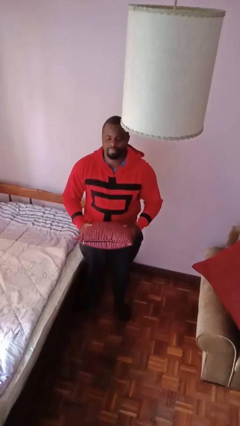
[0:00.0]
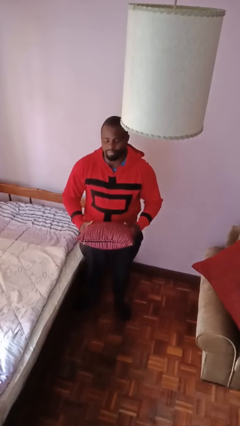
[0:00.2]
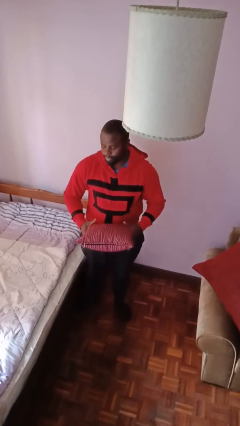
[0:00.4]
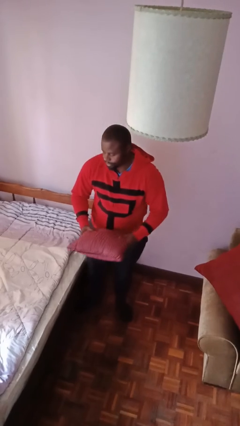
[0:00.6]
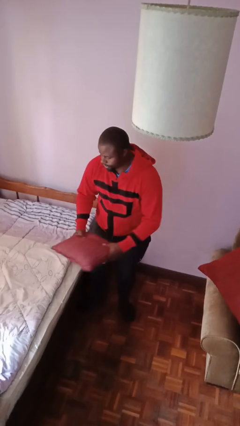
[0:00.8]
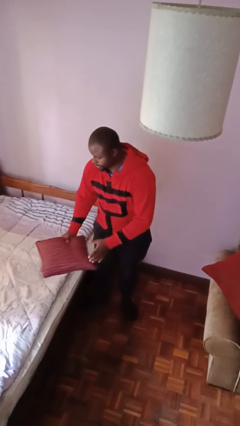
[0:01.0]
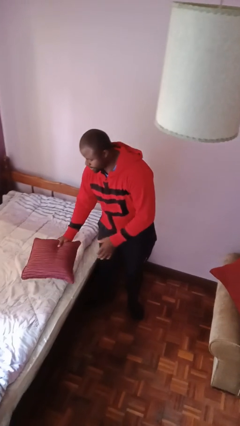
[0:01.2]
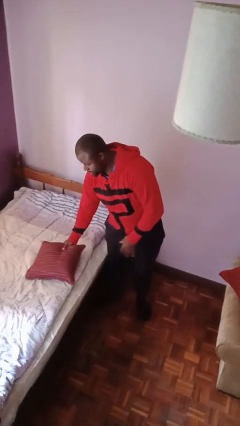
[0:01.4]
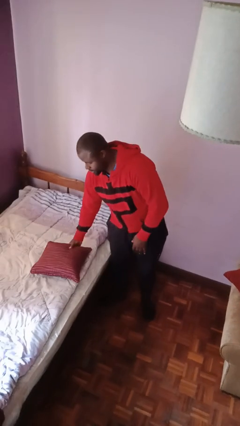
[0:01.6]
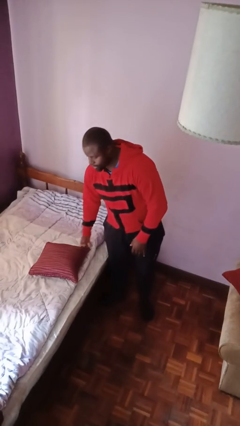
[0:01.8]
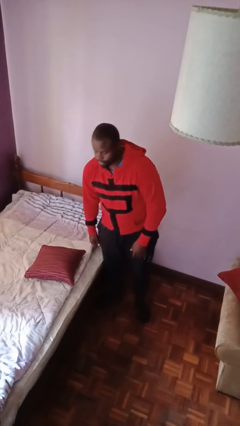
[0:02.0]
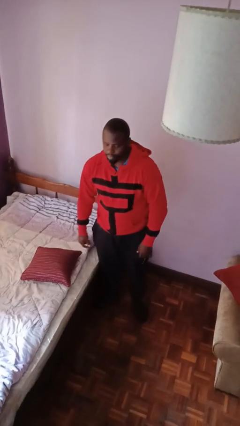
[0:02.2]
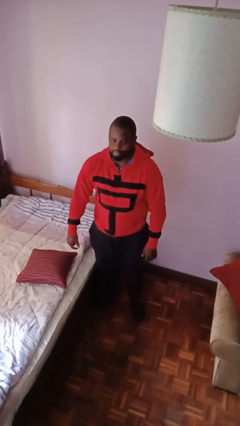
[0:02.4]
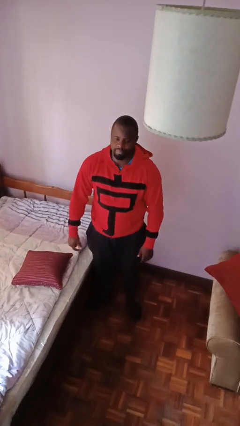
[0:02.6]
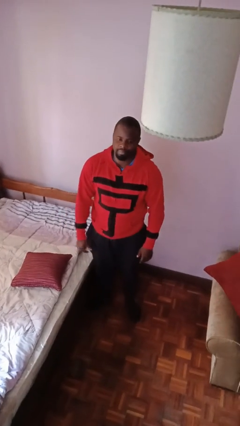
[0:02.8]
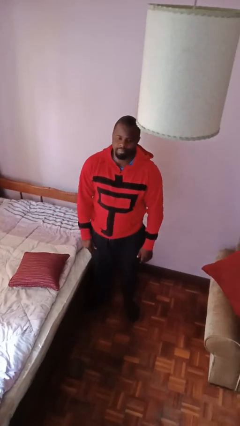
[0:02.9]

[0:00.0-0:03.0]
person puts down object on bed

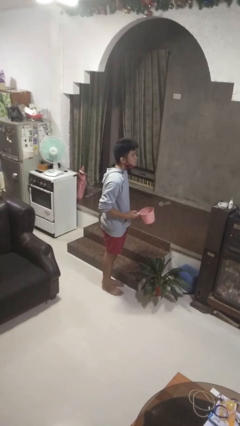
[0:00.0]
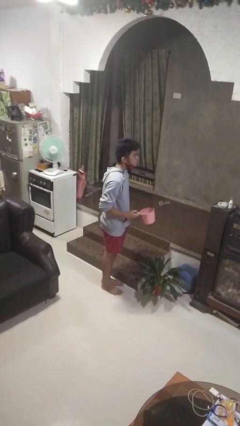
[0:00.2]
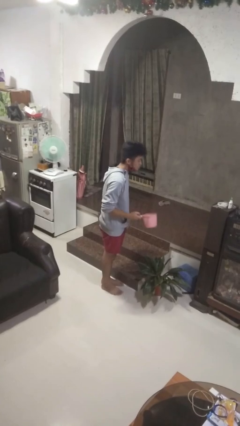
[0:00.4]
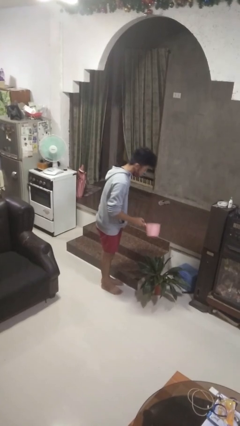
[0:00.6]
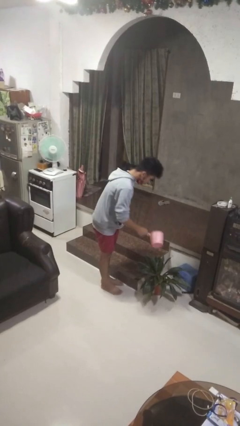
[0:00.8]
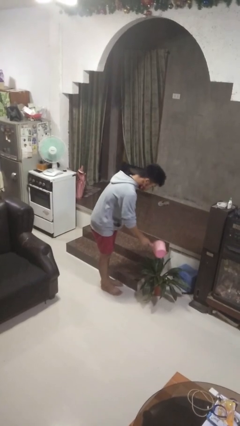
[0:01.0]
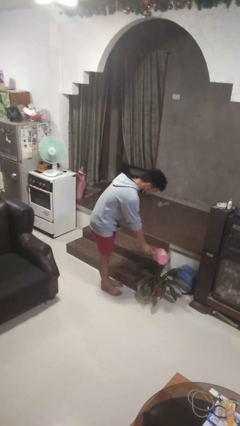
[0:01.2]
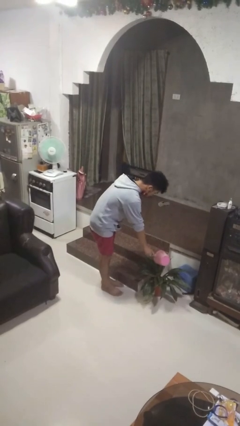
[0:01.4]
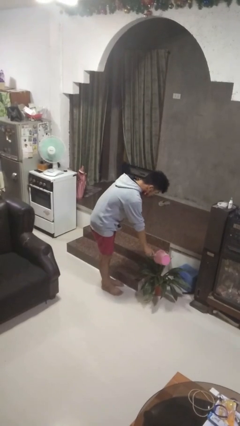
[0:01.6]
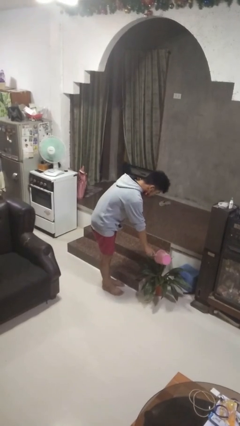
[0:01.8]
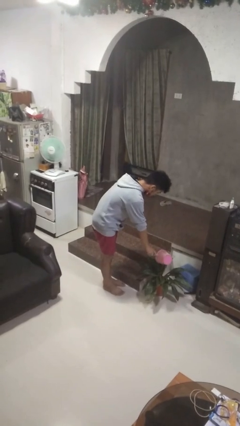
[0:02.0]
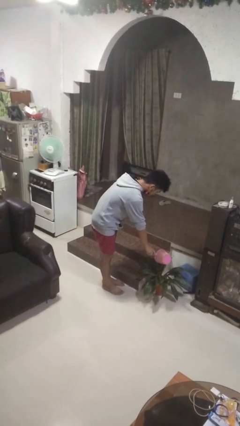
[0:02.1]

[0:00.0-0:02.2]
person waters houseplant

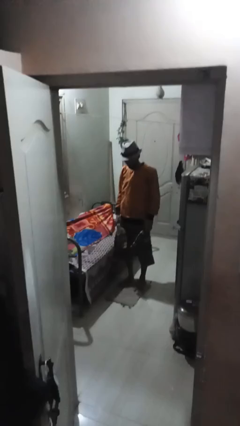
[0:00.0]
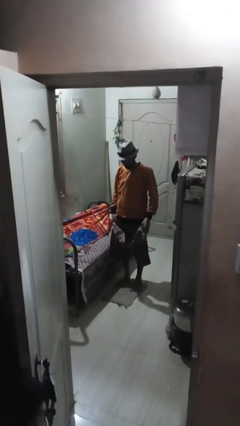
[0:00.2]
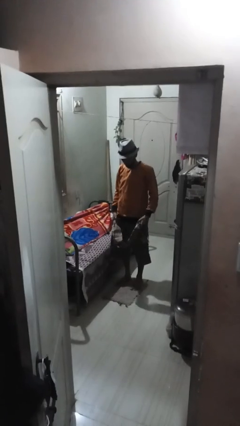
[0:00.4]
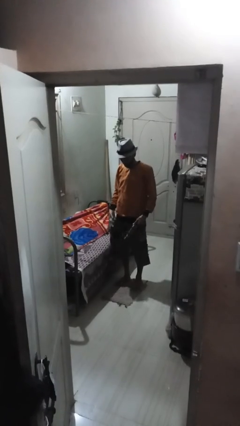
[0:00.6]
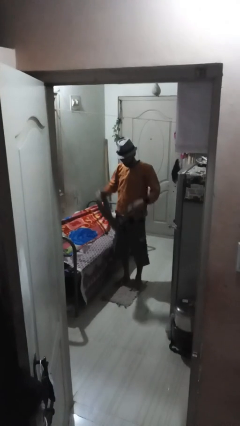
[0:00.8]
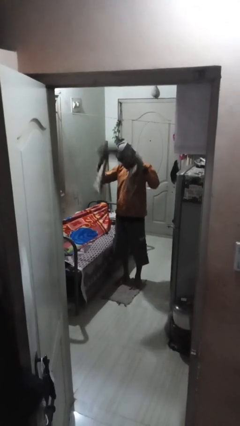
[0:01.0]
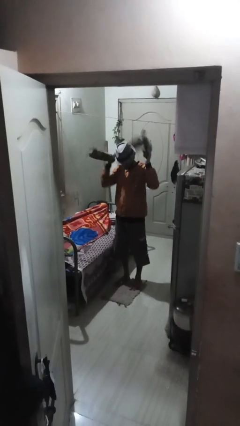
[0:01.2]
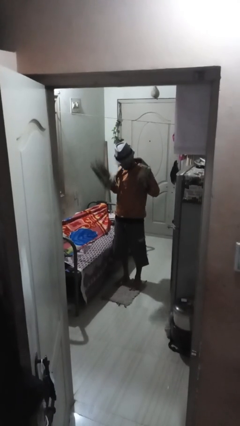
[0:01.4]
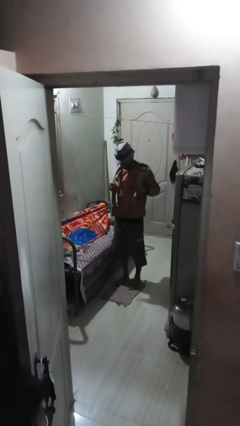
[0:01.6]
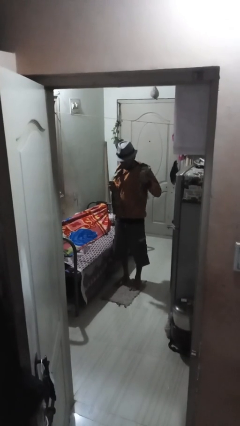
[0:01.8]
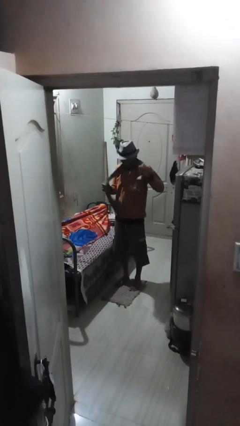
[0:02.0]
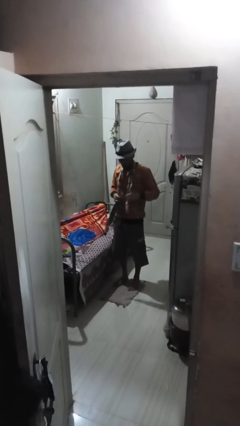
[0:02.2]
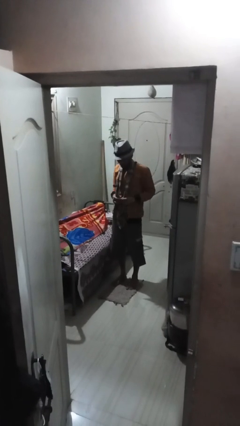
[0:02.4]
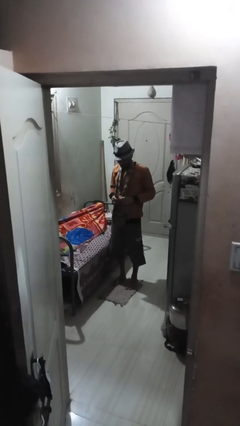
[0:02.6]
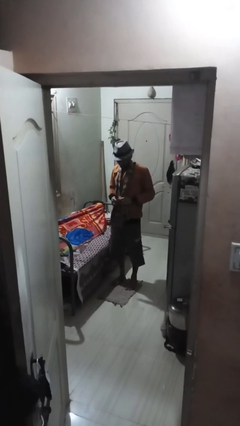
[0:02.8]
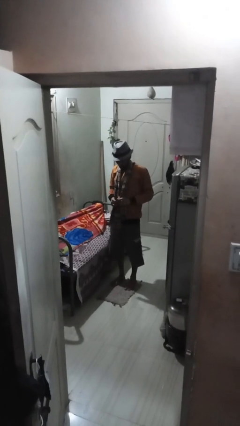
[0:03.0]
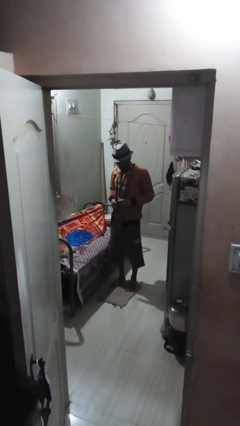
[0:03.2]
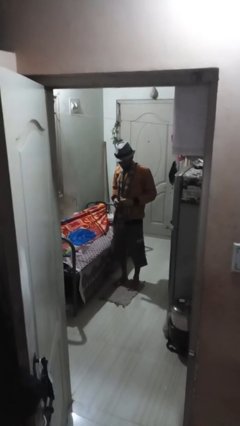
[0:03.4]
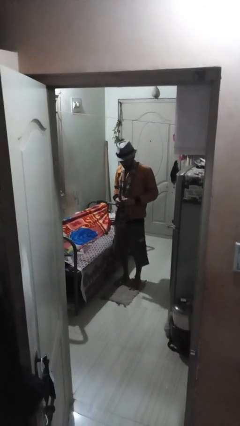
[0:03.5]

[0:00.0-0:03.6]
person puts on scarf

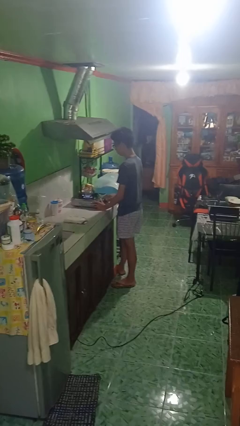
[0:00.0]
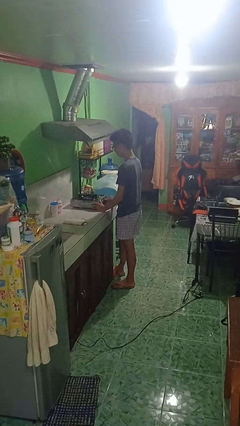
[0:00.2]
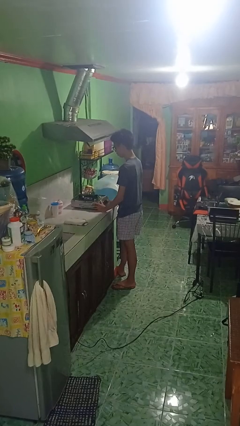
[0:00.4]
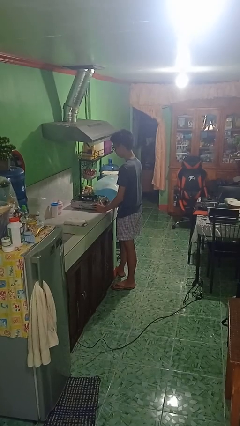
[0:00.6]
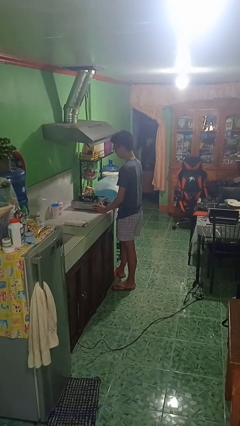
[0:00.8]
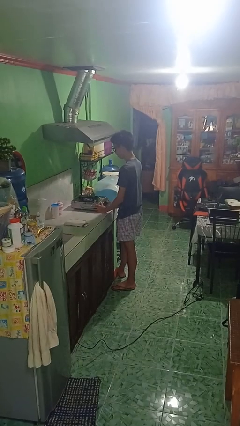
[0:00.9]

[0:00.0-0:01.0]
person turns off stovetop

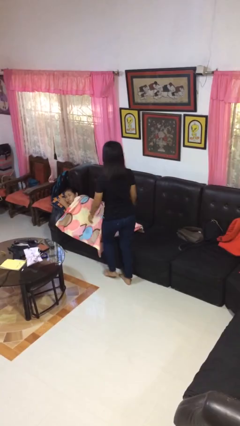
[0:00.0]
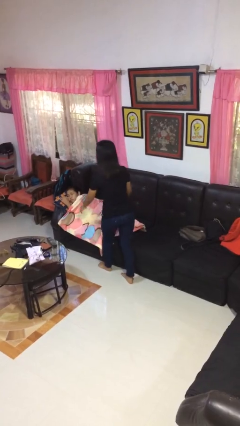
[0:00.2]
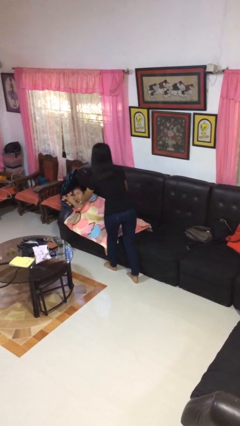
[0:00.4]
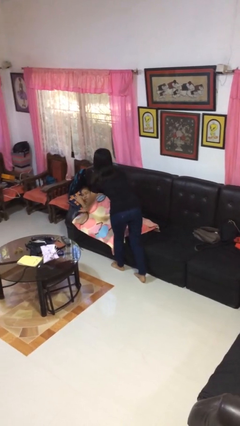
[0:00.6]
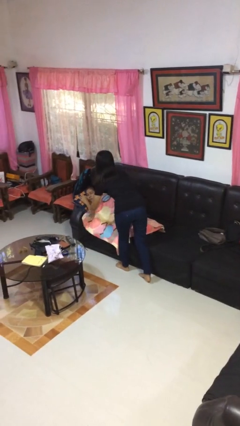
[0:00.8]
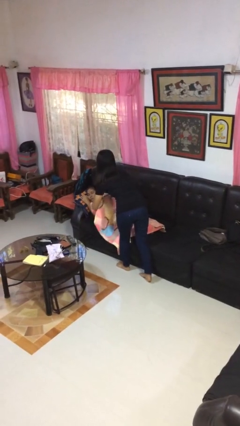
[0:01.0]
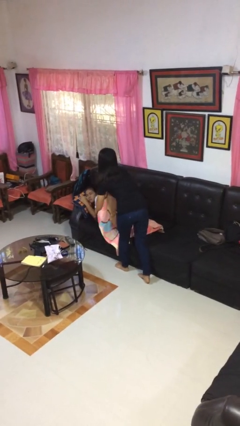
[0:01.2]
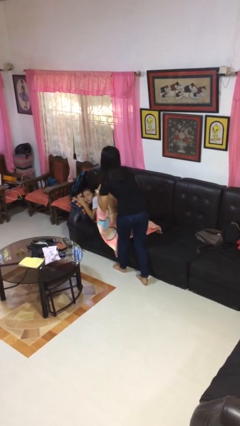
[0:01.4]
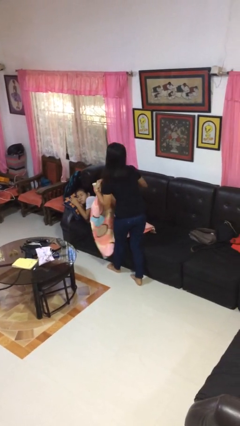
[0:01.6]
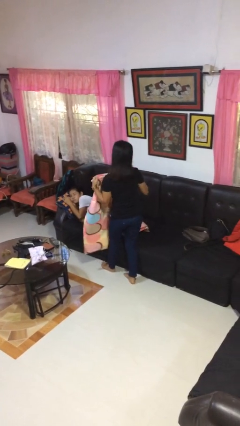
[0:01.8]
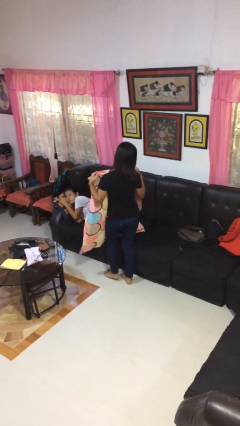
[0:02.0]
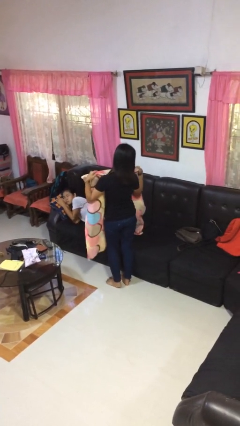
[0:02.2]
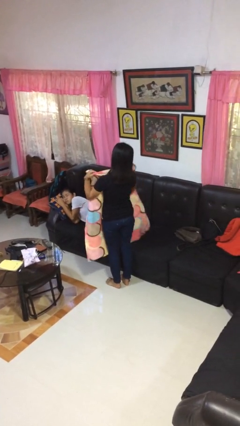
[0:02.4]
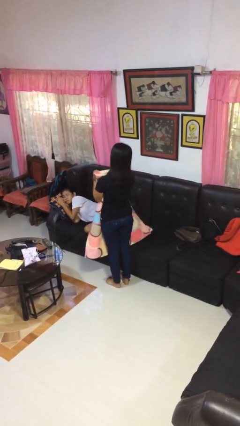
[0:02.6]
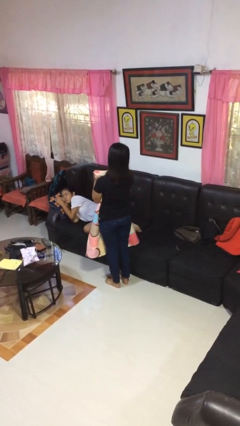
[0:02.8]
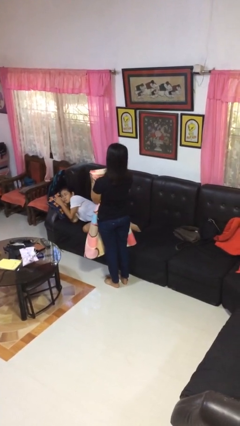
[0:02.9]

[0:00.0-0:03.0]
person uncovers friend with blanket

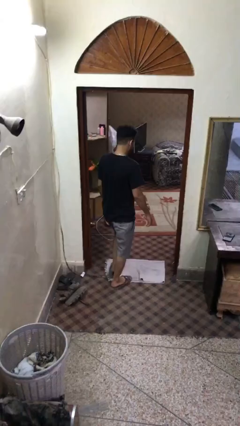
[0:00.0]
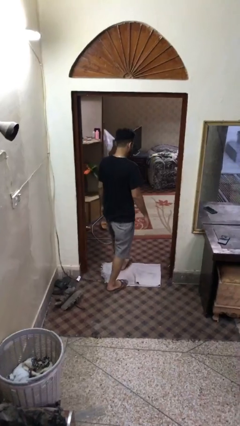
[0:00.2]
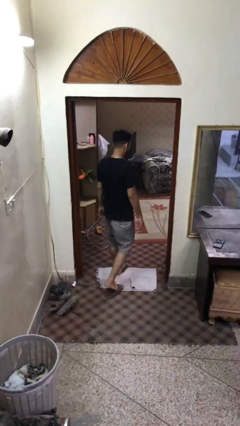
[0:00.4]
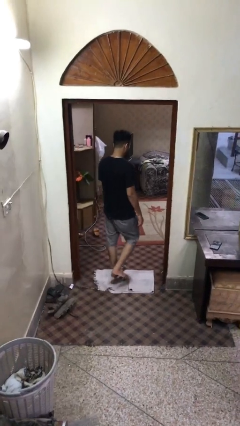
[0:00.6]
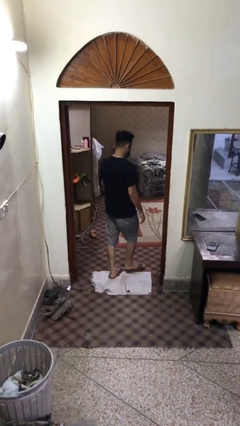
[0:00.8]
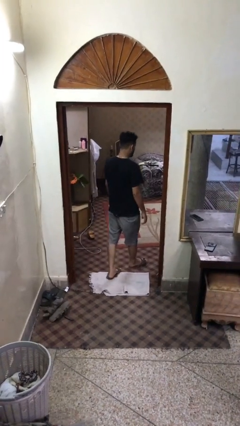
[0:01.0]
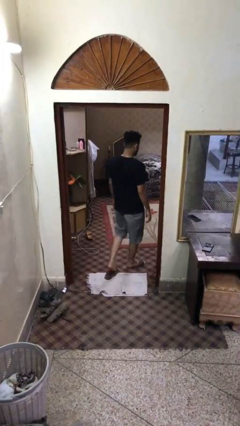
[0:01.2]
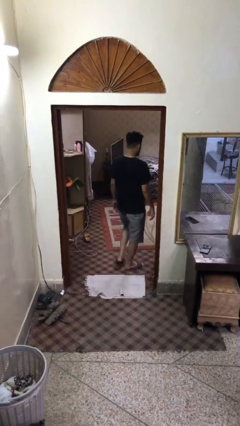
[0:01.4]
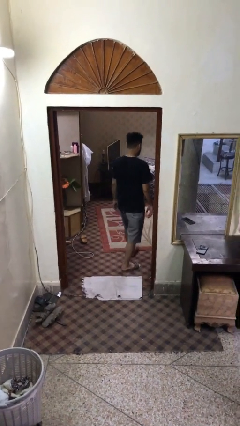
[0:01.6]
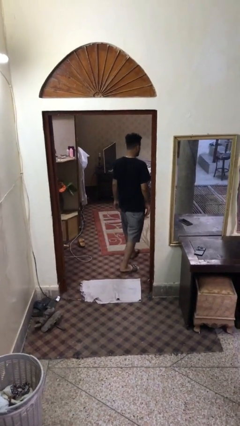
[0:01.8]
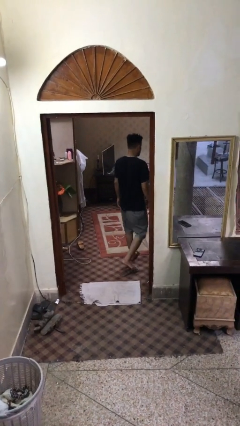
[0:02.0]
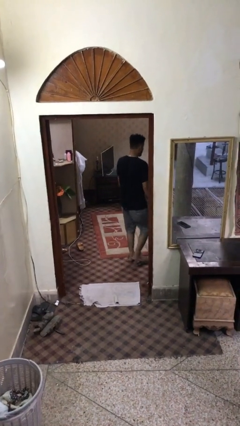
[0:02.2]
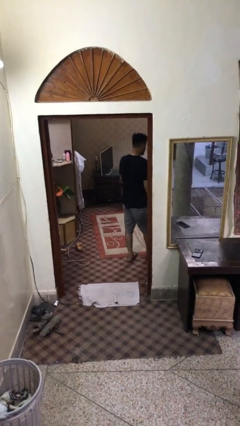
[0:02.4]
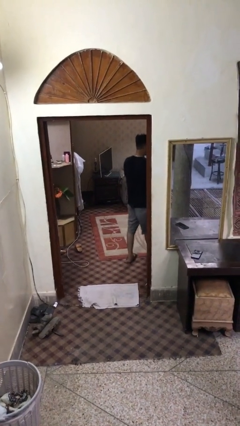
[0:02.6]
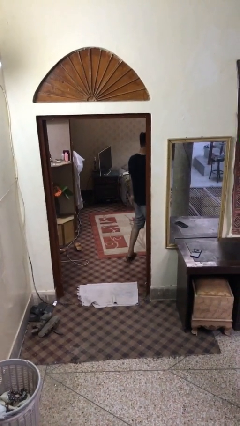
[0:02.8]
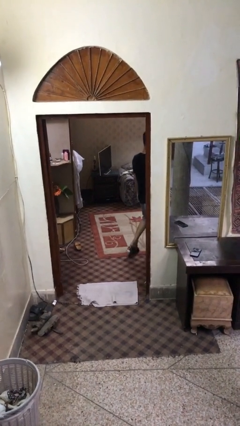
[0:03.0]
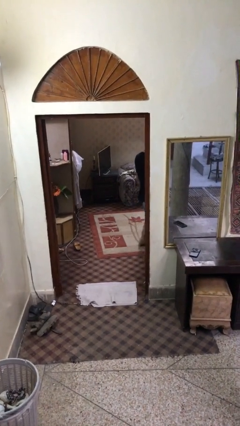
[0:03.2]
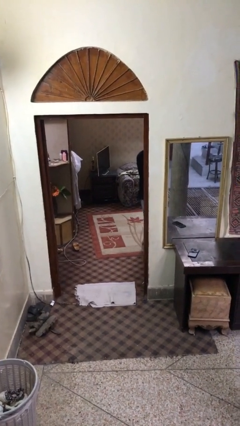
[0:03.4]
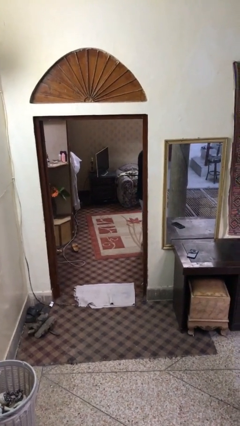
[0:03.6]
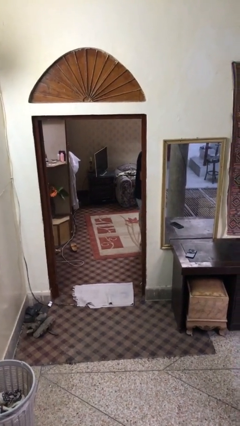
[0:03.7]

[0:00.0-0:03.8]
person exits scene through structure

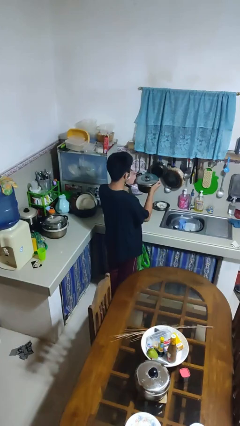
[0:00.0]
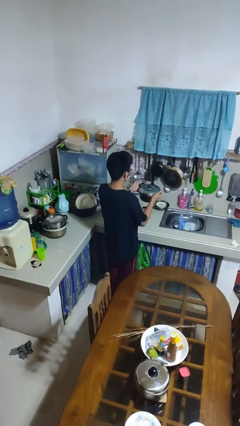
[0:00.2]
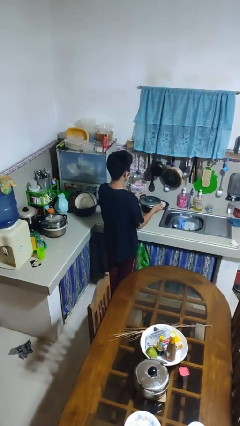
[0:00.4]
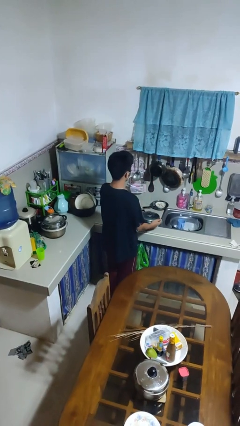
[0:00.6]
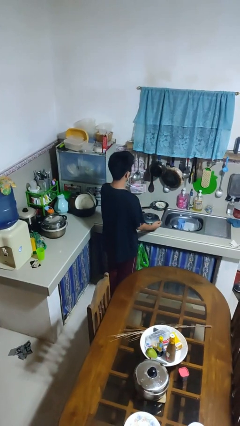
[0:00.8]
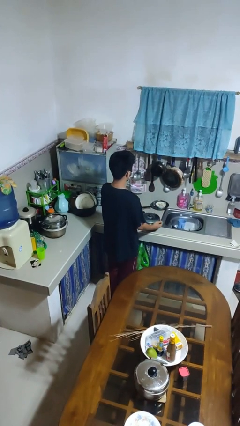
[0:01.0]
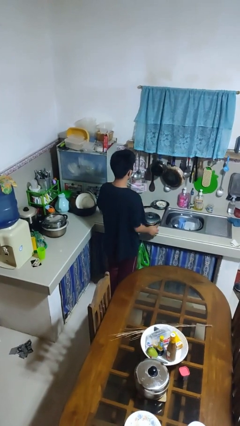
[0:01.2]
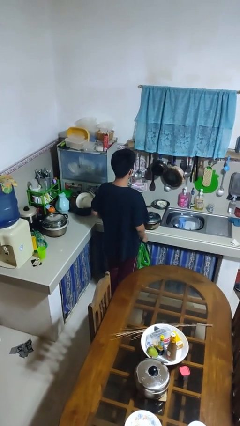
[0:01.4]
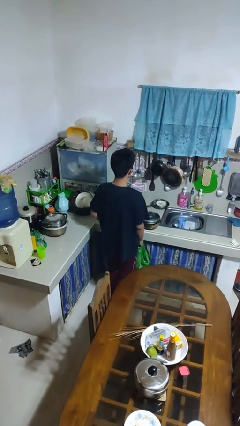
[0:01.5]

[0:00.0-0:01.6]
person puts down object on countertop
